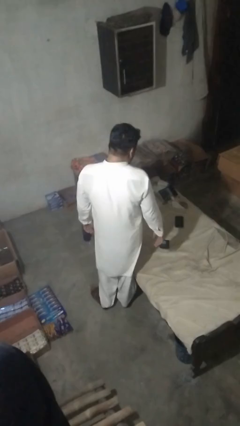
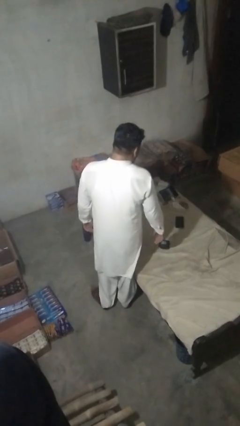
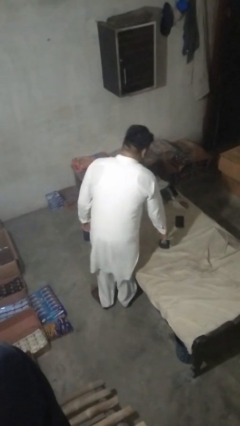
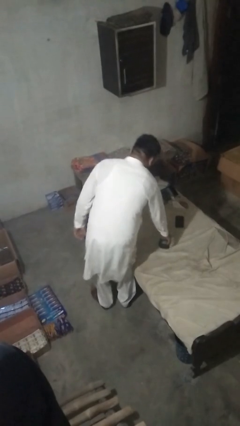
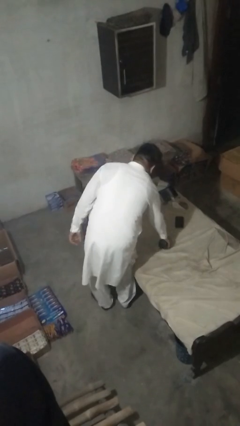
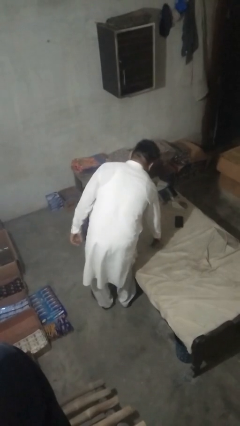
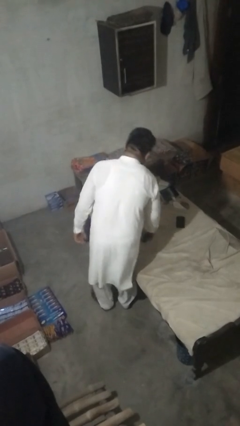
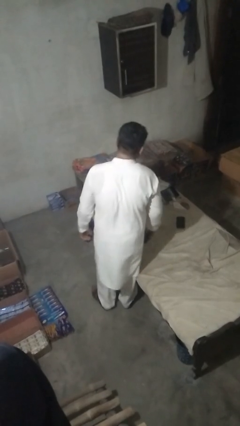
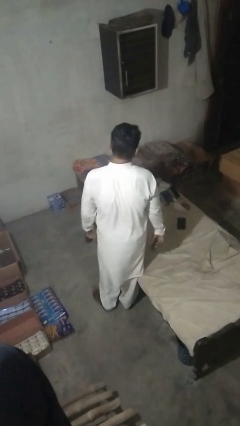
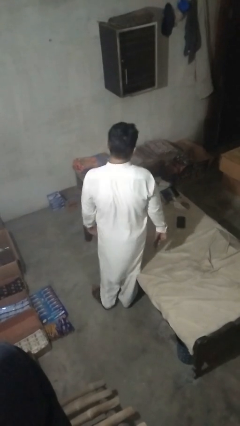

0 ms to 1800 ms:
person picks up object from bed

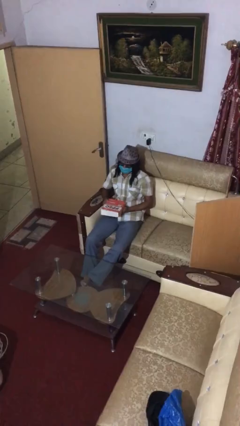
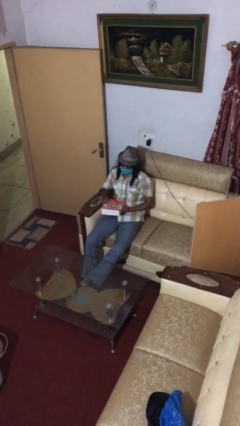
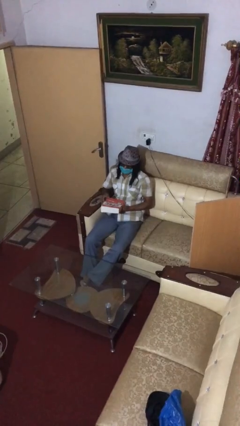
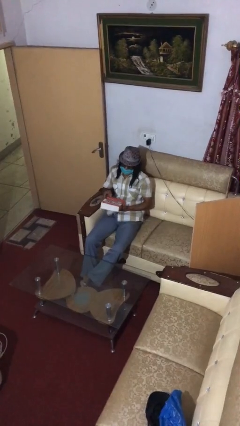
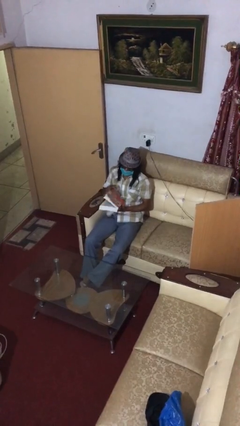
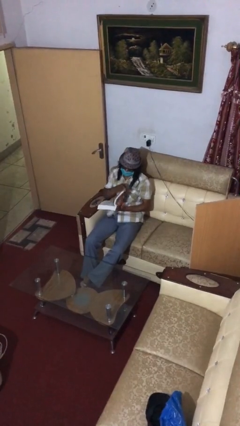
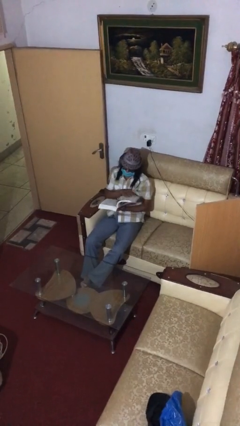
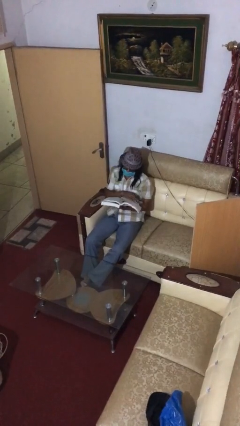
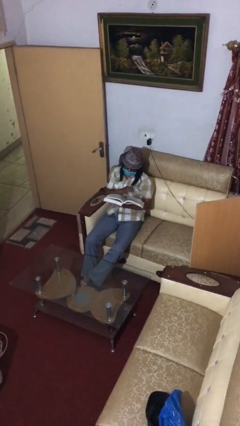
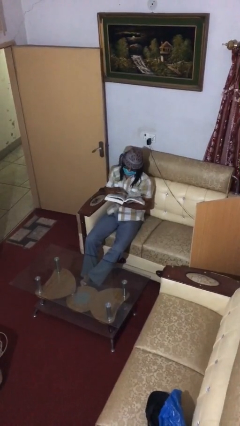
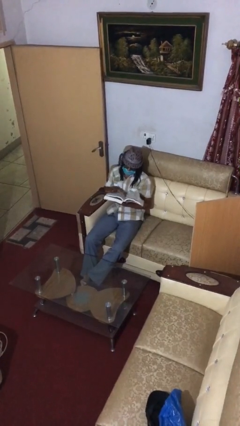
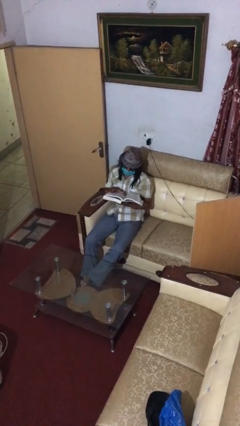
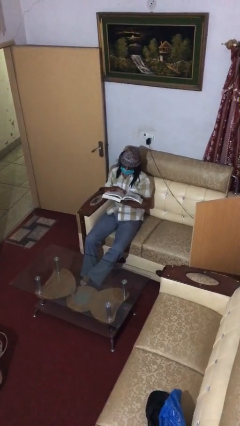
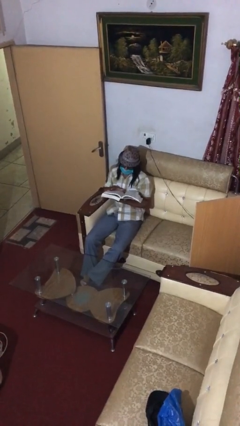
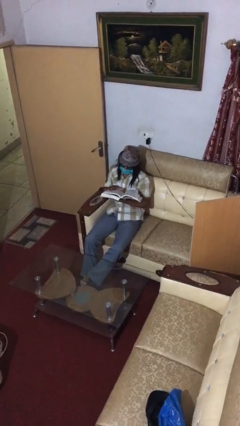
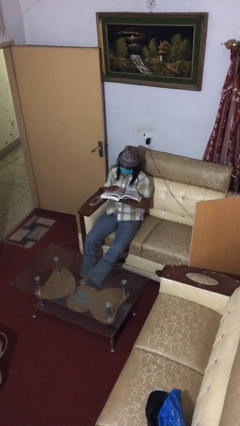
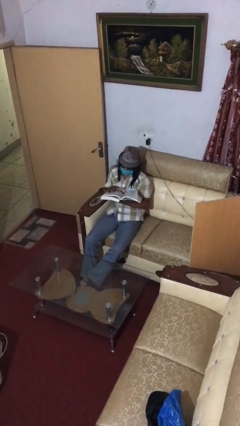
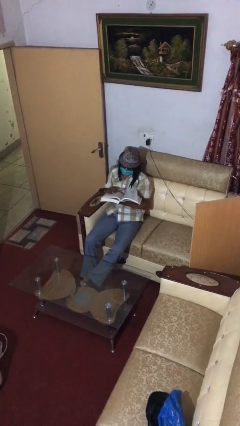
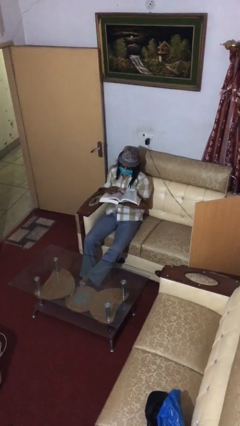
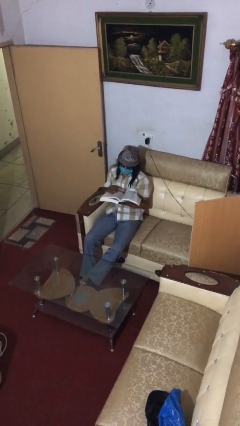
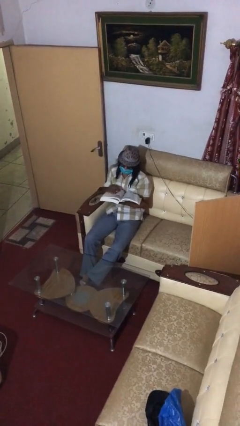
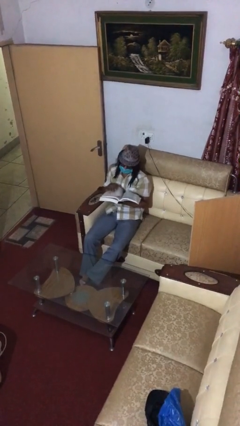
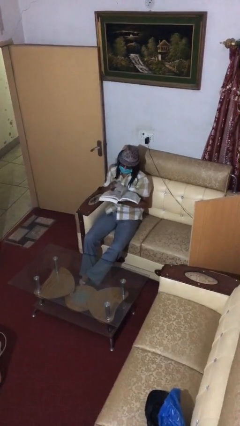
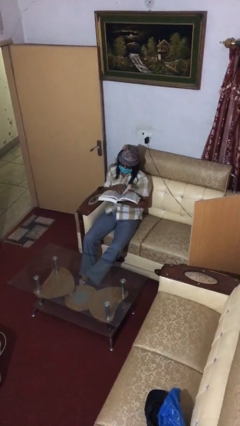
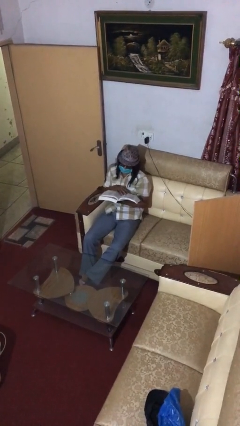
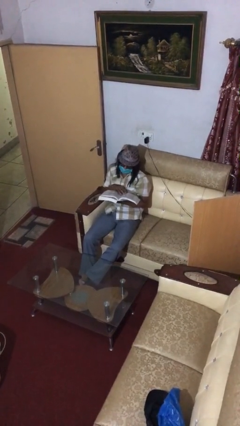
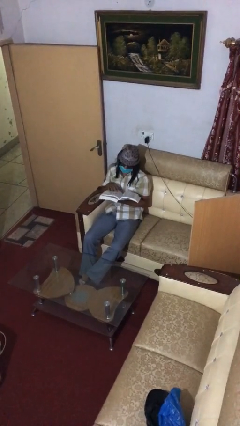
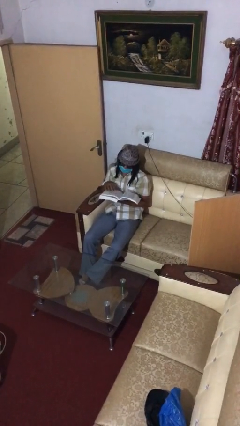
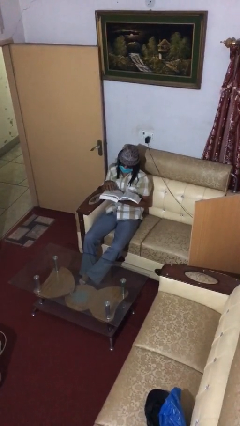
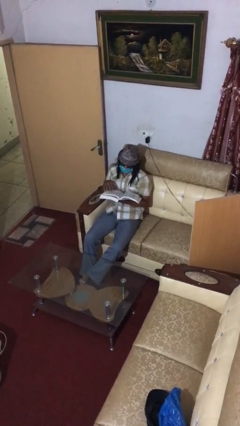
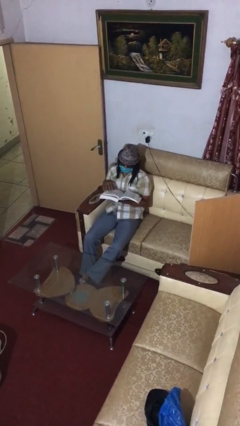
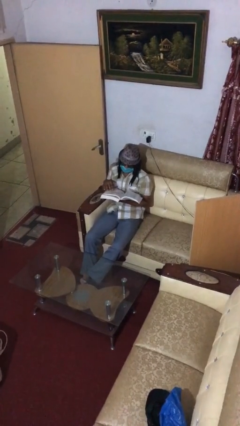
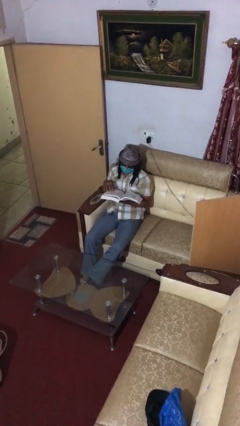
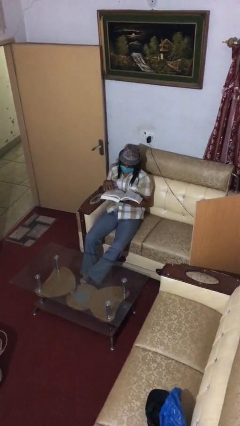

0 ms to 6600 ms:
person reads document

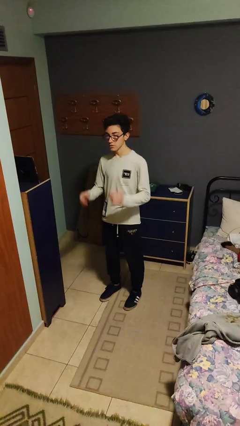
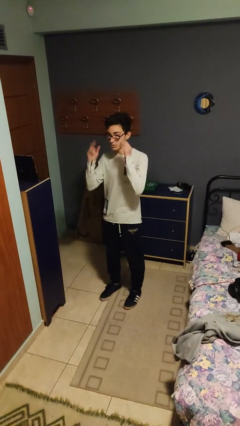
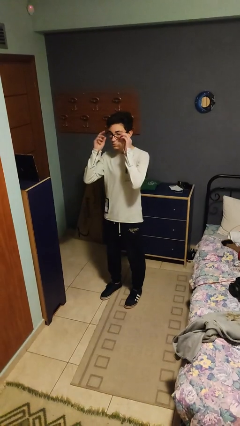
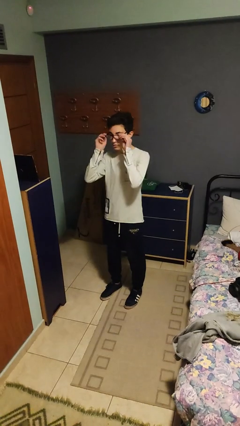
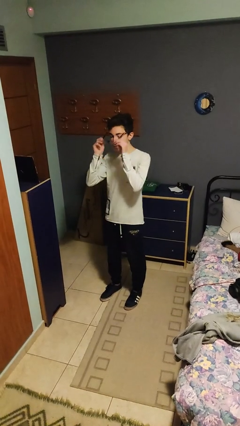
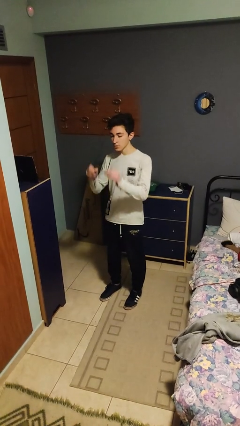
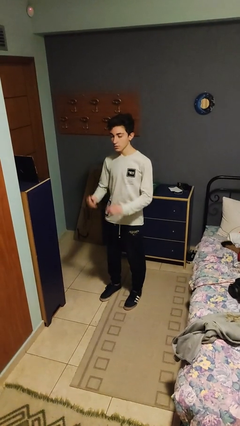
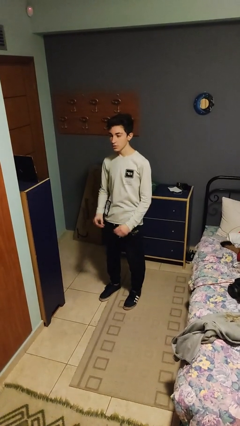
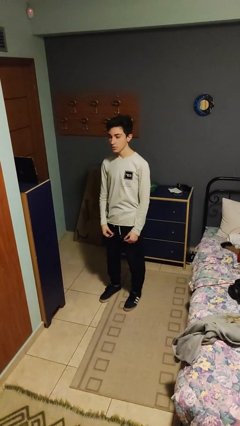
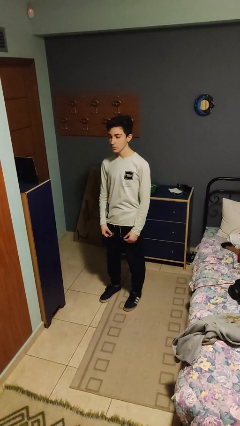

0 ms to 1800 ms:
person takes off glasses

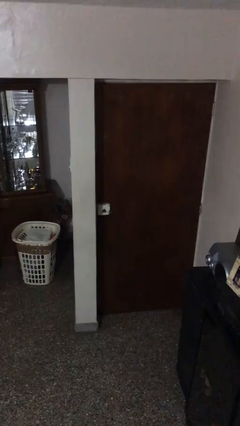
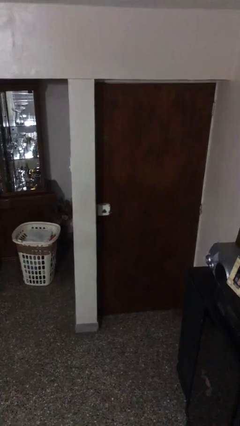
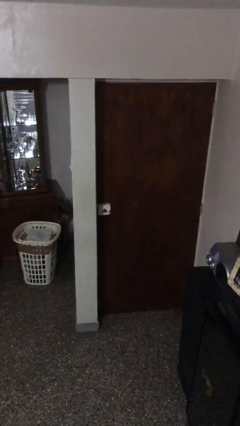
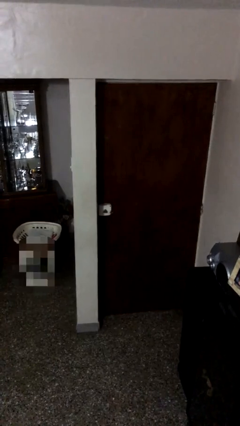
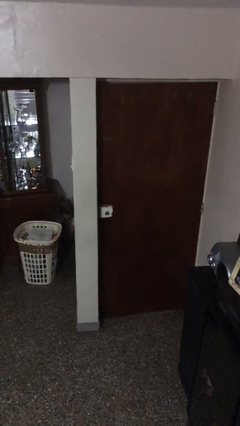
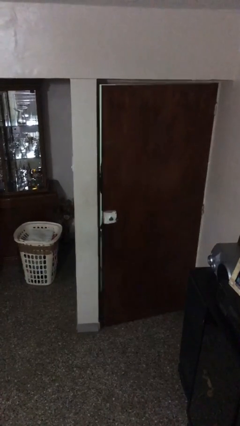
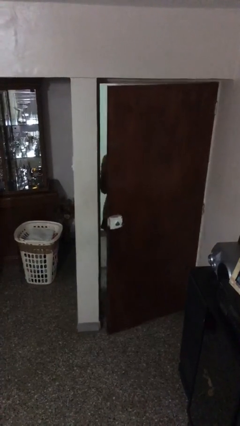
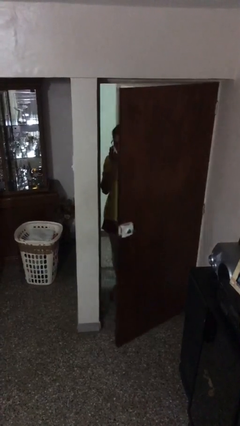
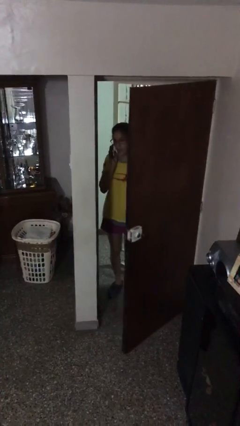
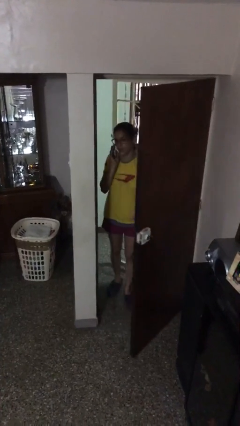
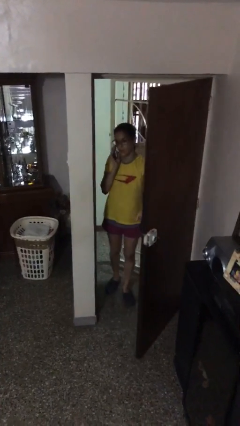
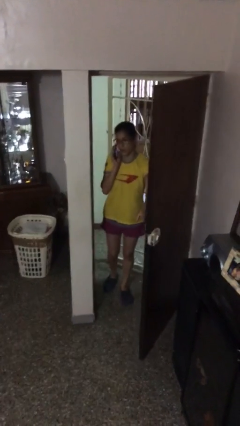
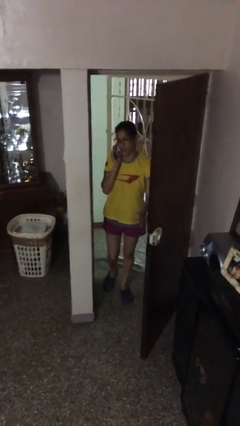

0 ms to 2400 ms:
person opens facility door

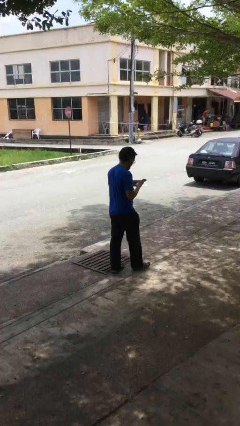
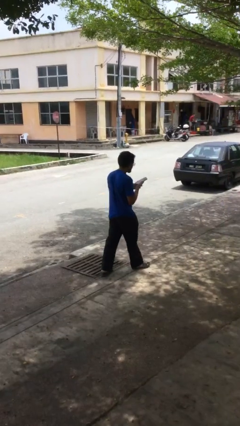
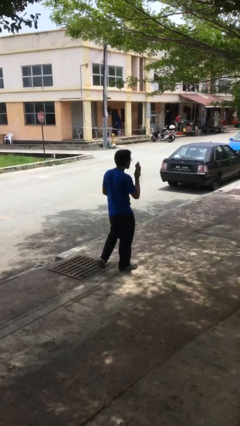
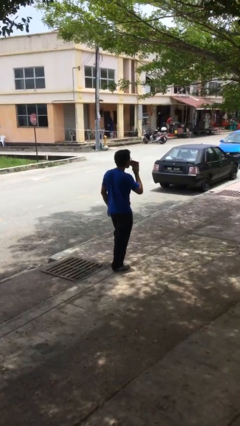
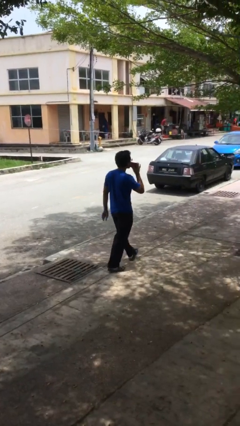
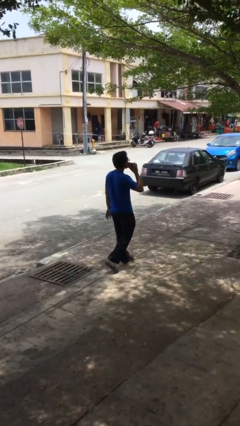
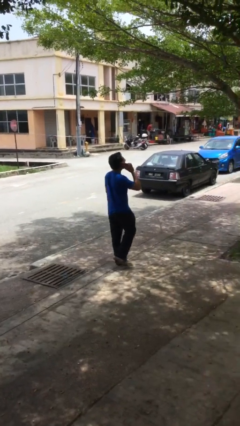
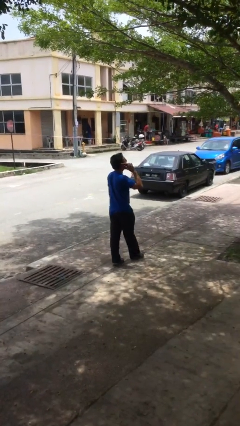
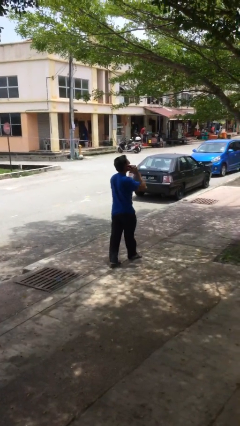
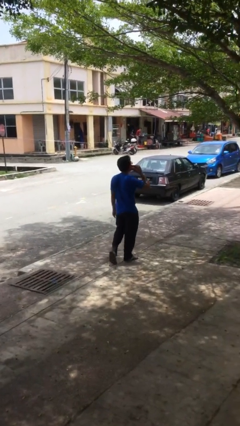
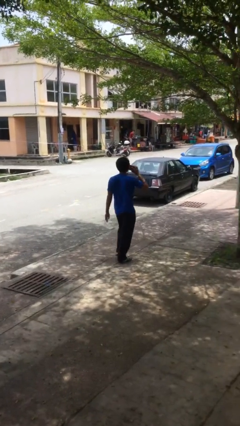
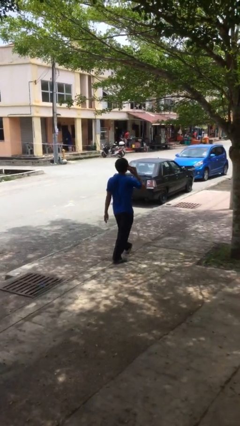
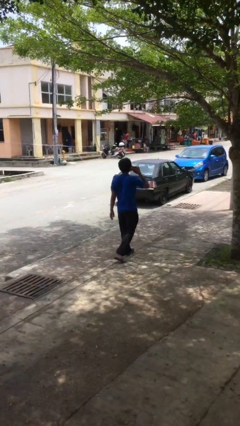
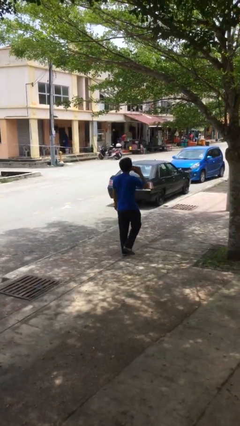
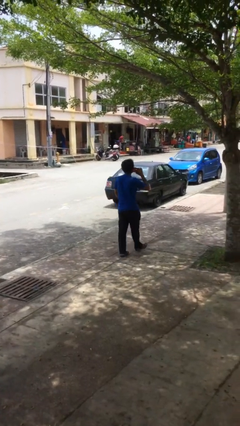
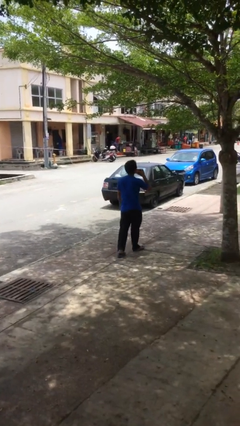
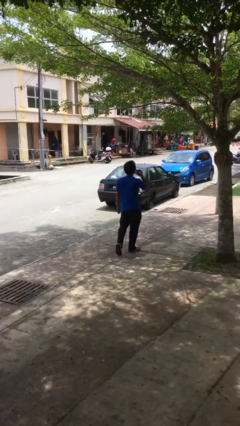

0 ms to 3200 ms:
person talks on phone

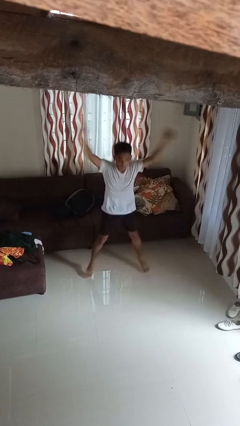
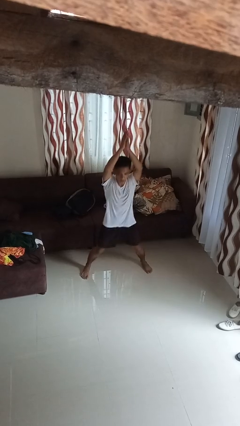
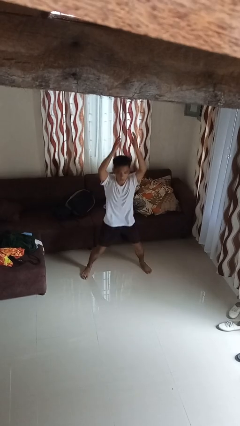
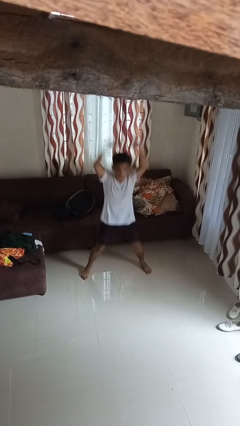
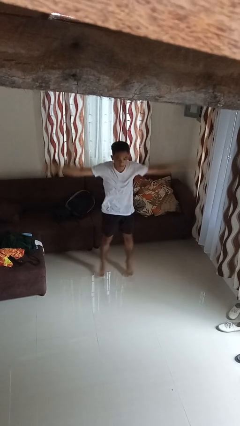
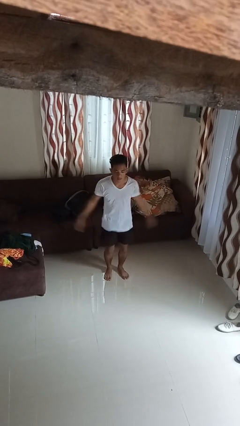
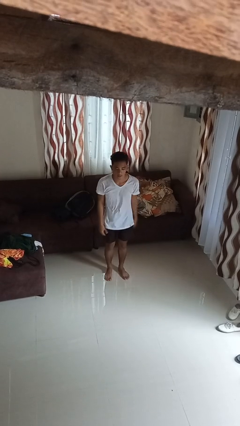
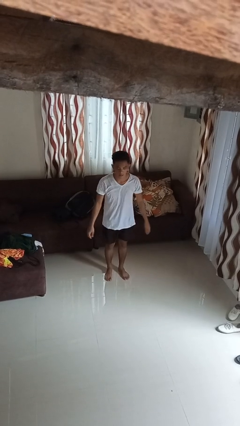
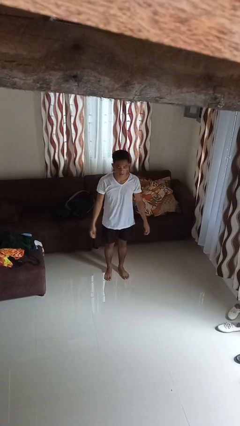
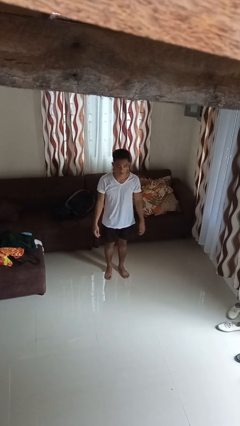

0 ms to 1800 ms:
person exercises with jumping jacks
